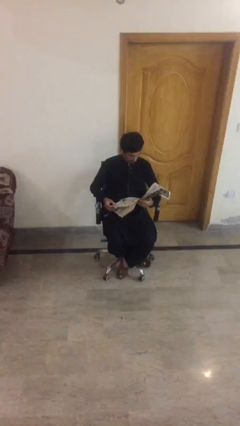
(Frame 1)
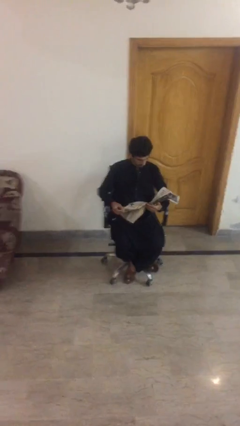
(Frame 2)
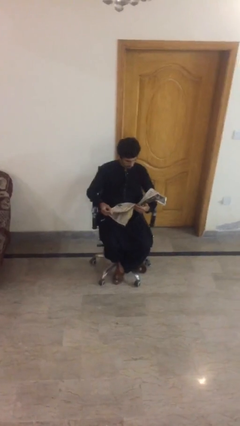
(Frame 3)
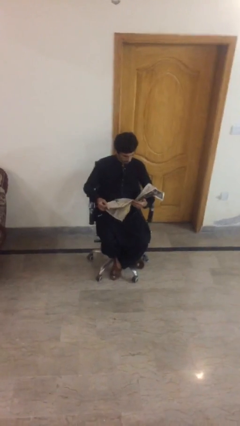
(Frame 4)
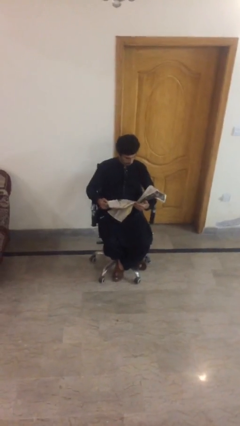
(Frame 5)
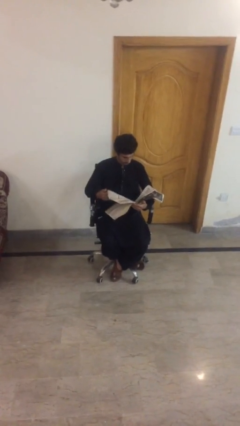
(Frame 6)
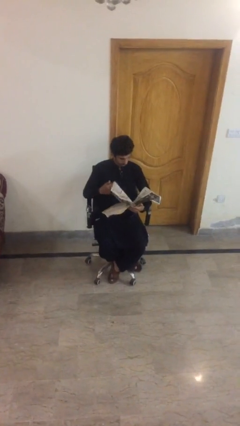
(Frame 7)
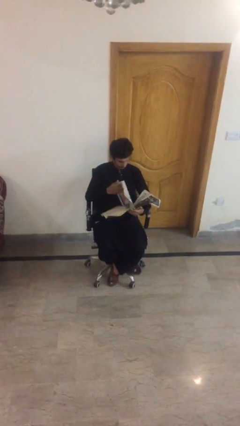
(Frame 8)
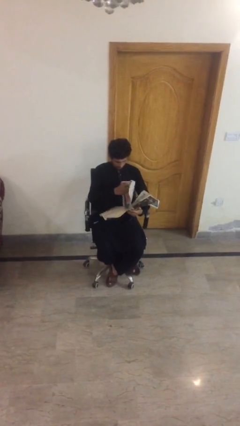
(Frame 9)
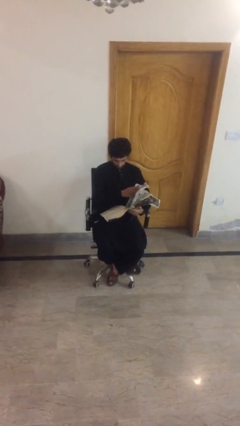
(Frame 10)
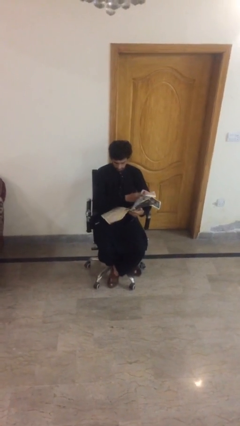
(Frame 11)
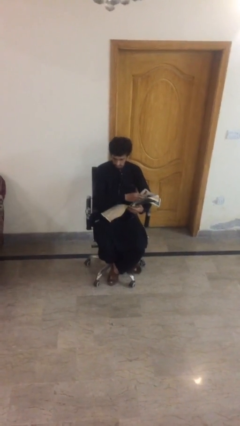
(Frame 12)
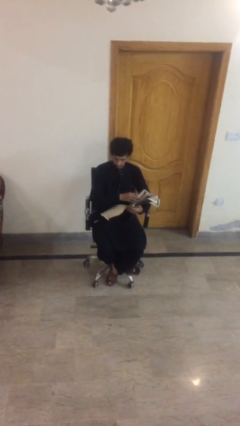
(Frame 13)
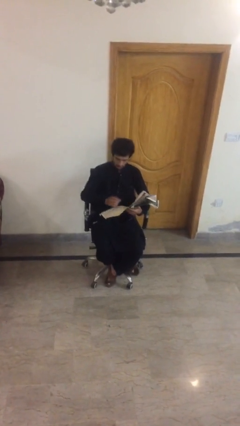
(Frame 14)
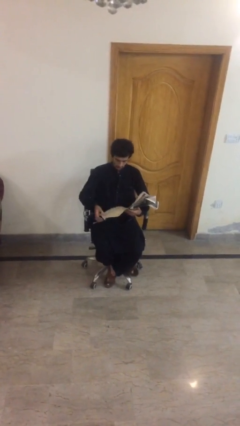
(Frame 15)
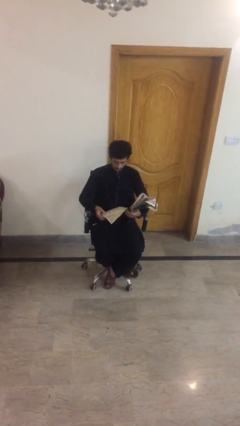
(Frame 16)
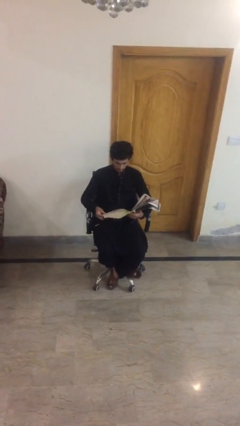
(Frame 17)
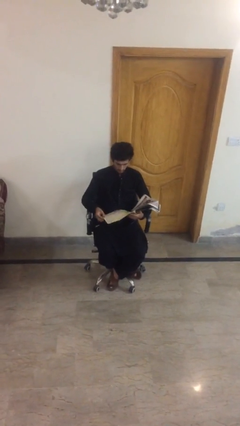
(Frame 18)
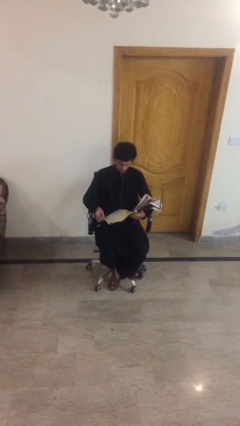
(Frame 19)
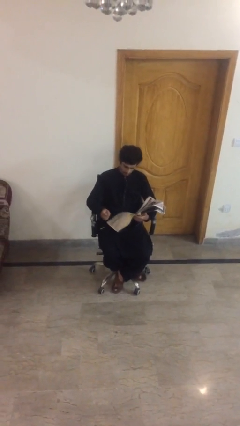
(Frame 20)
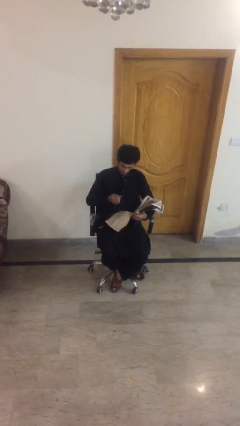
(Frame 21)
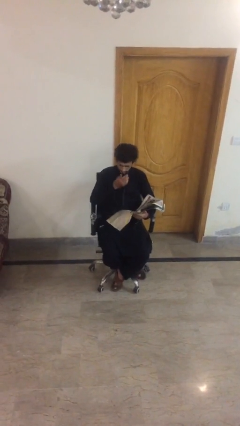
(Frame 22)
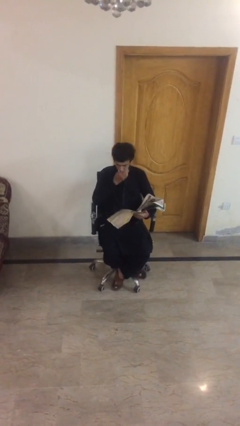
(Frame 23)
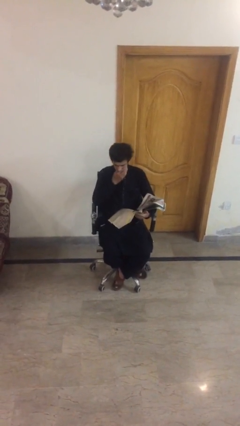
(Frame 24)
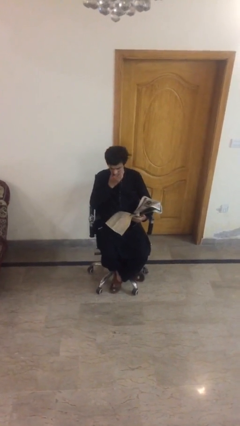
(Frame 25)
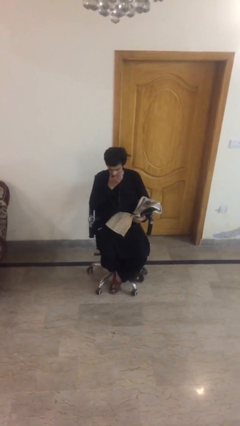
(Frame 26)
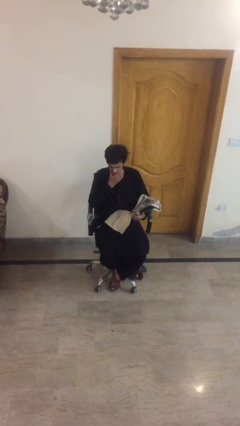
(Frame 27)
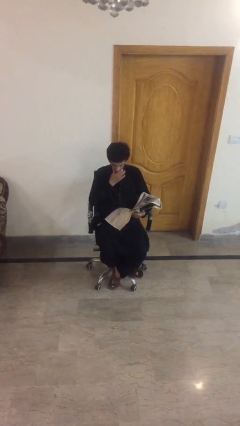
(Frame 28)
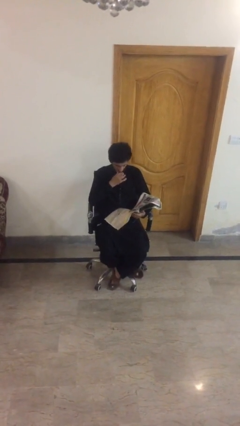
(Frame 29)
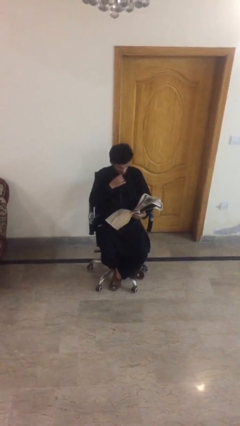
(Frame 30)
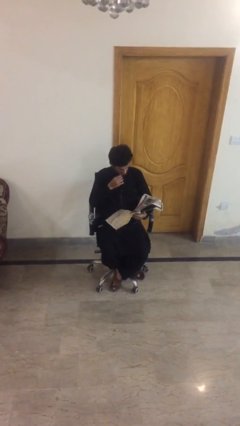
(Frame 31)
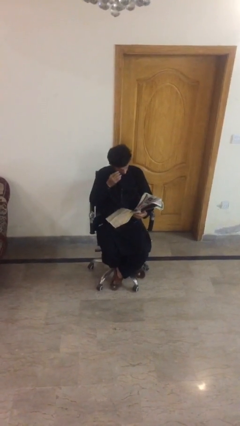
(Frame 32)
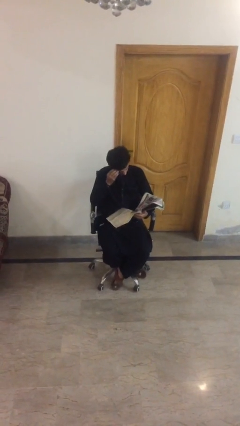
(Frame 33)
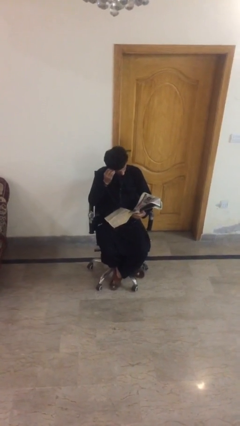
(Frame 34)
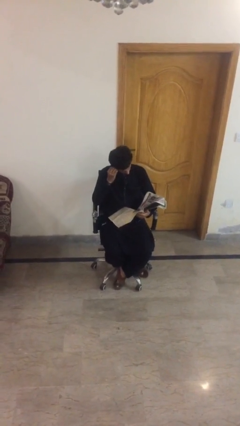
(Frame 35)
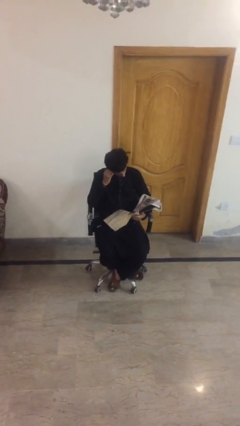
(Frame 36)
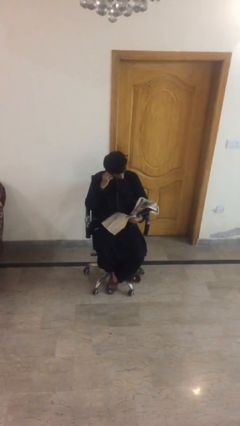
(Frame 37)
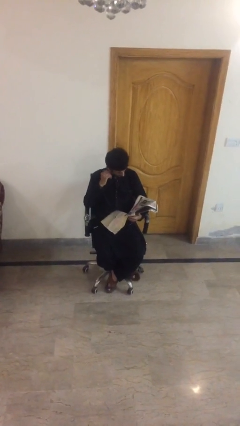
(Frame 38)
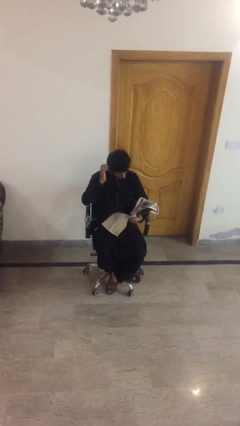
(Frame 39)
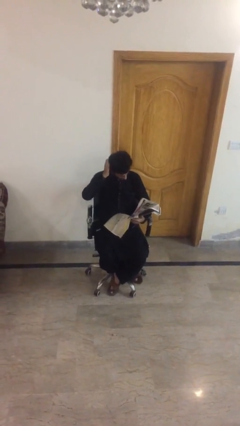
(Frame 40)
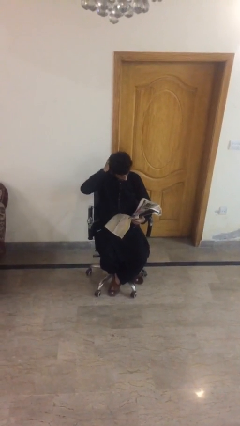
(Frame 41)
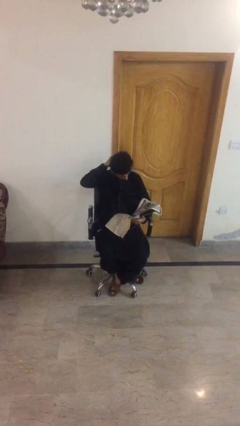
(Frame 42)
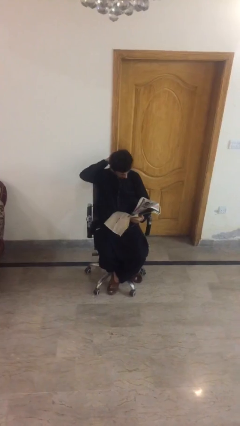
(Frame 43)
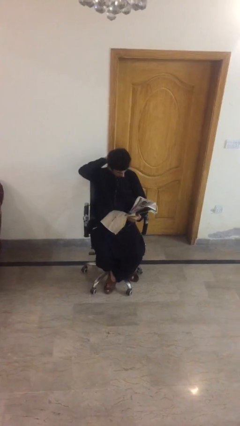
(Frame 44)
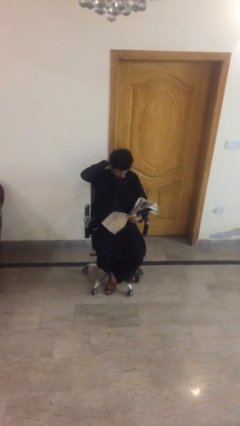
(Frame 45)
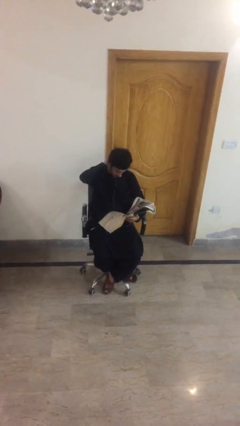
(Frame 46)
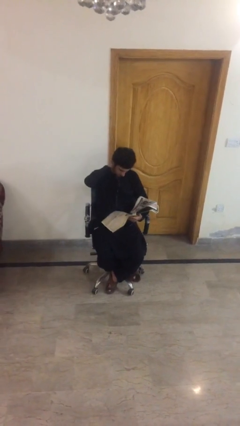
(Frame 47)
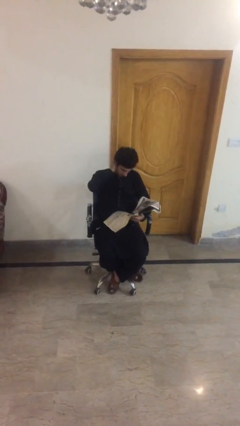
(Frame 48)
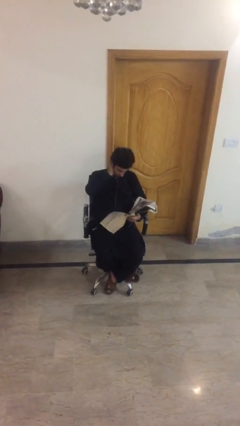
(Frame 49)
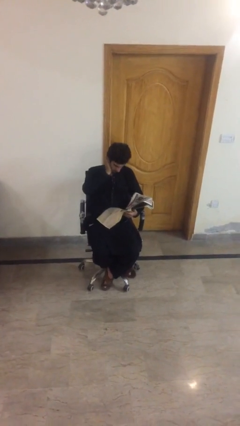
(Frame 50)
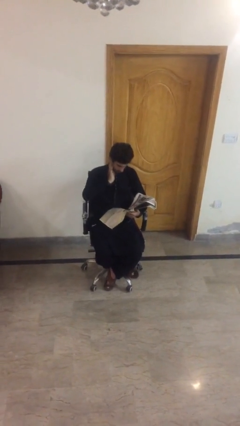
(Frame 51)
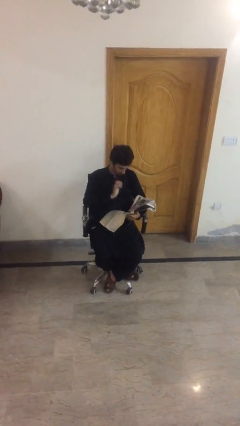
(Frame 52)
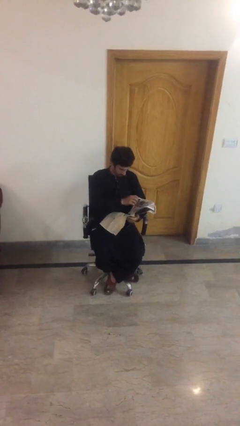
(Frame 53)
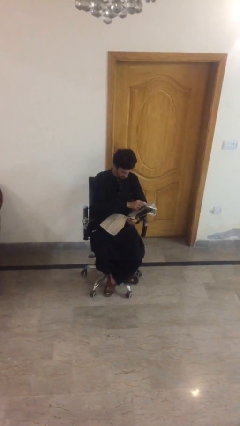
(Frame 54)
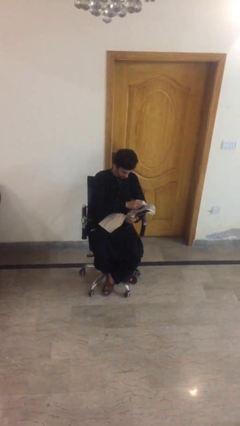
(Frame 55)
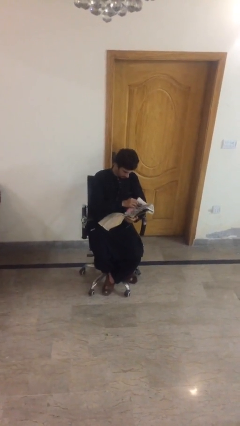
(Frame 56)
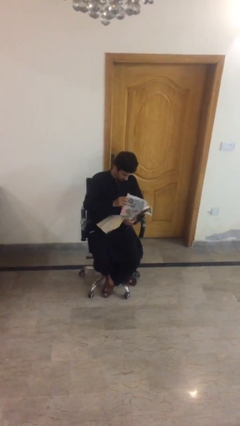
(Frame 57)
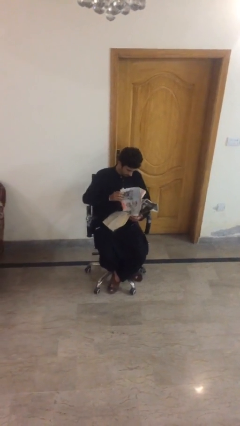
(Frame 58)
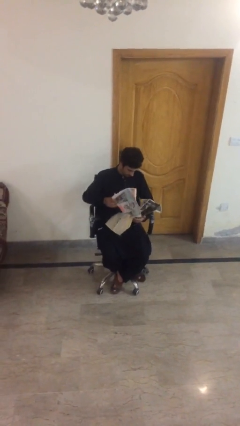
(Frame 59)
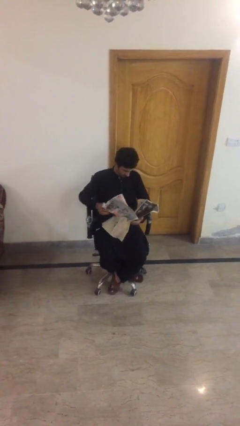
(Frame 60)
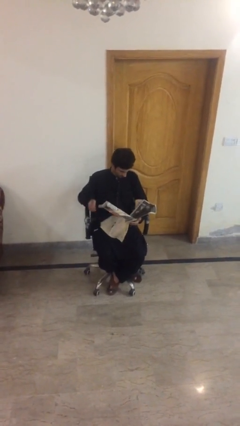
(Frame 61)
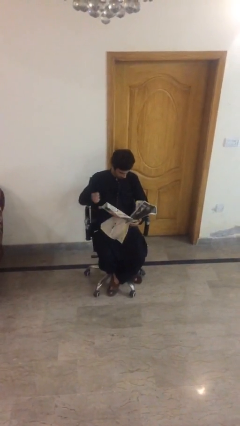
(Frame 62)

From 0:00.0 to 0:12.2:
person reads document

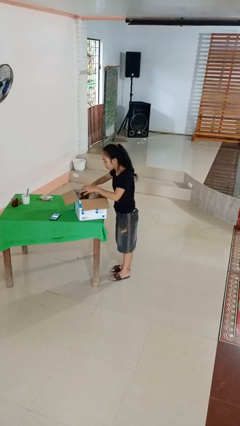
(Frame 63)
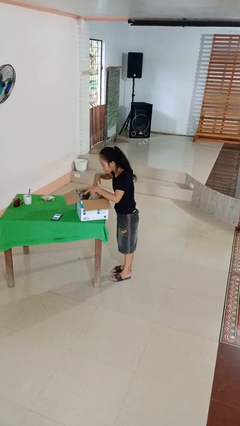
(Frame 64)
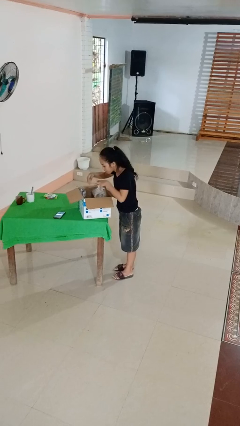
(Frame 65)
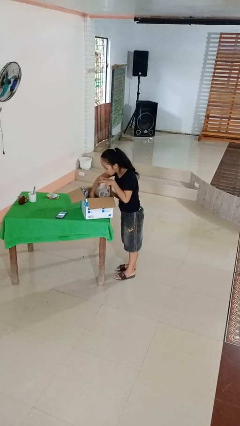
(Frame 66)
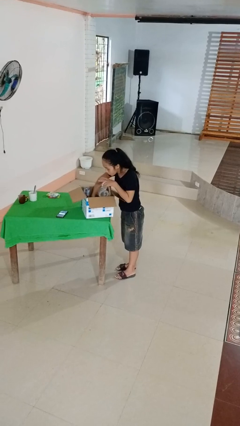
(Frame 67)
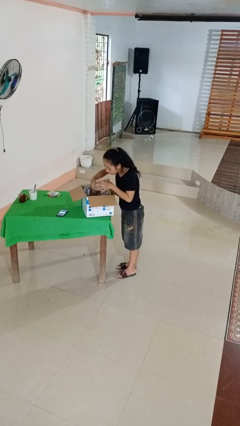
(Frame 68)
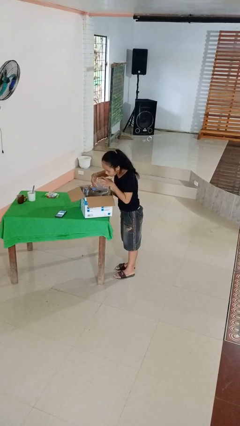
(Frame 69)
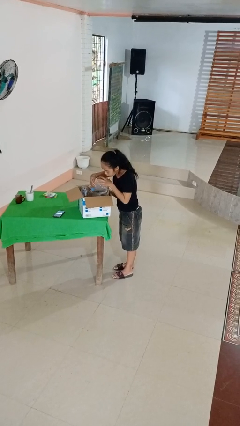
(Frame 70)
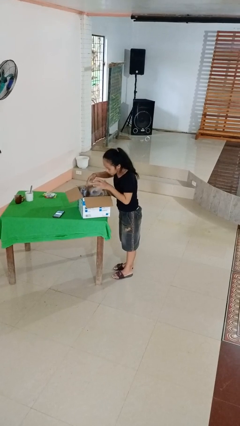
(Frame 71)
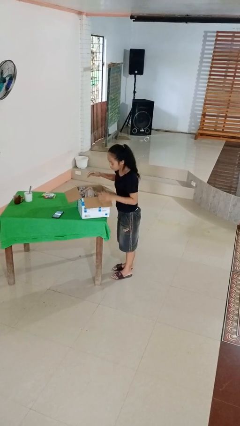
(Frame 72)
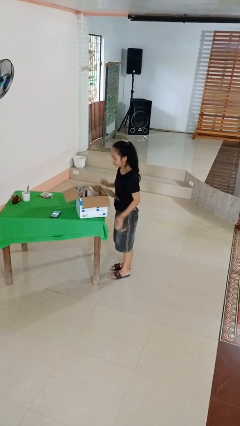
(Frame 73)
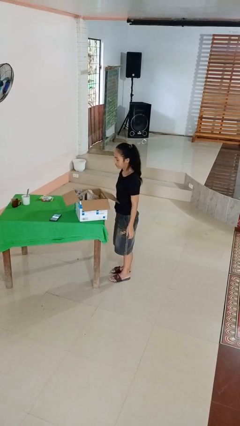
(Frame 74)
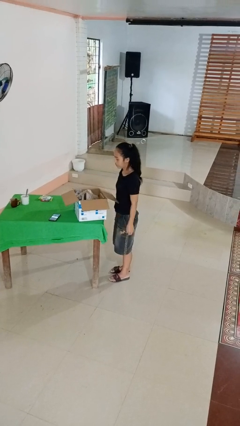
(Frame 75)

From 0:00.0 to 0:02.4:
person searches in box

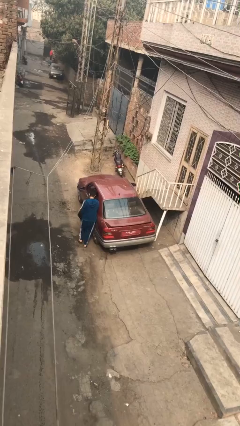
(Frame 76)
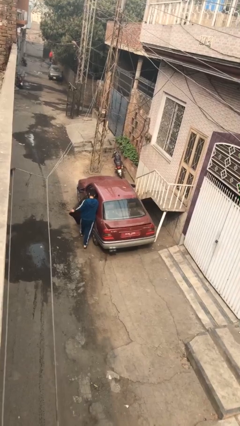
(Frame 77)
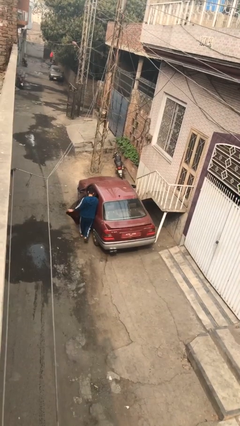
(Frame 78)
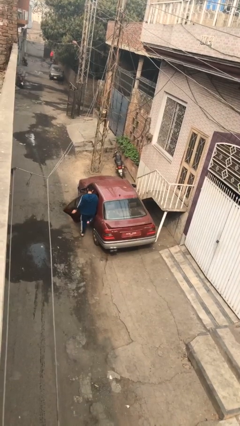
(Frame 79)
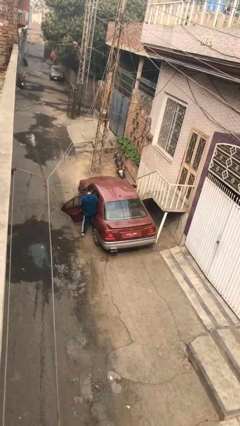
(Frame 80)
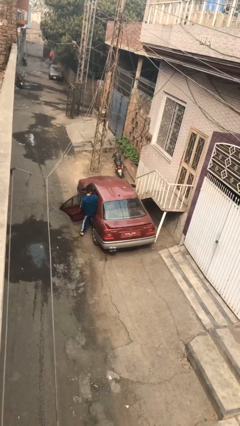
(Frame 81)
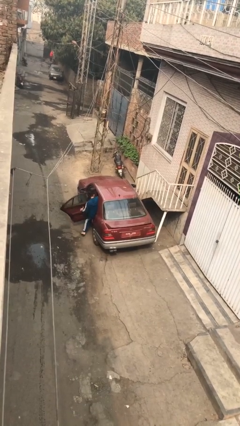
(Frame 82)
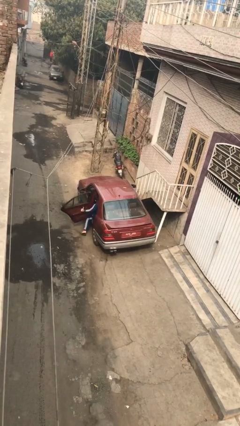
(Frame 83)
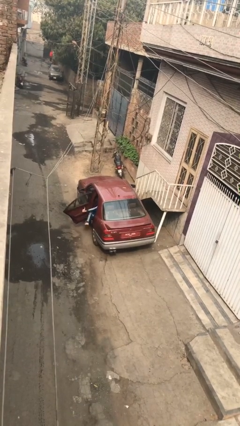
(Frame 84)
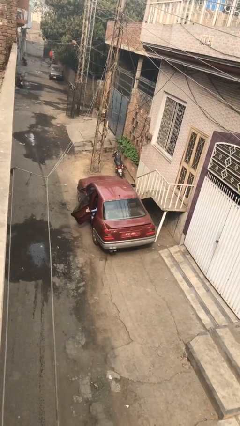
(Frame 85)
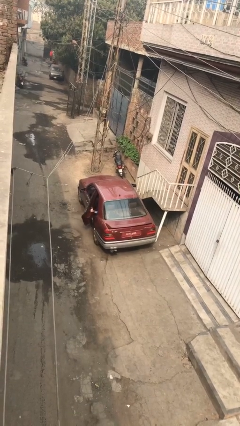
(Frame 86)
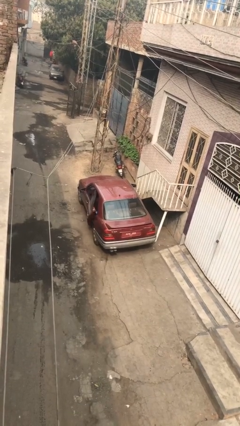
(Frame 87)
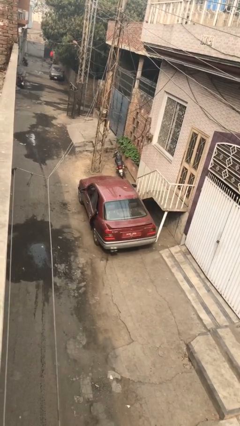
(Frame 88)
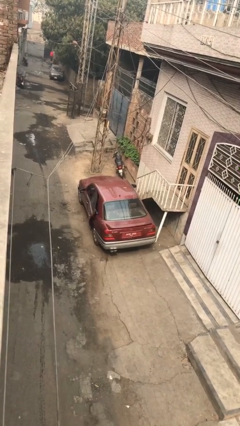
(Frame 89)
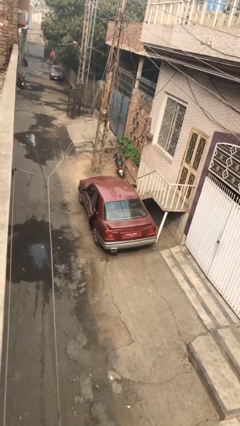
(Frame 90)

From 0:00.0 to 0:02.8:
car picks up person

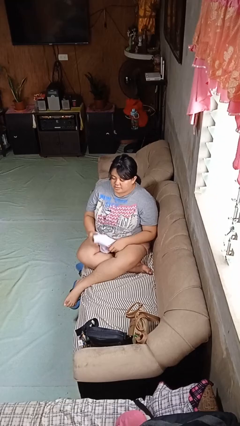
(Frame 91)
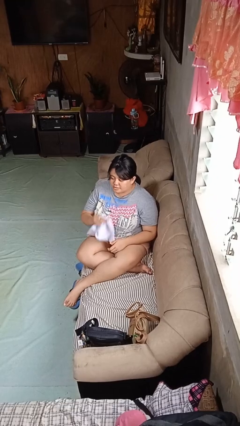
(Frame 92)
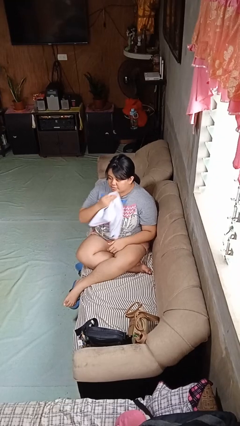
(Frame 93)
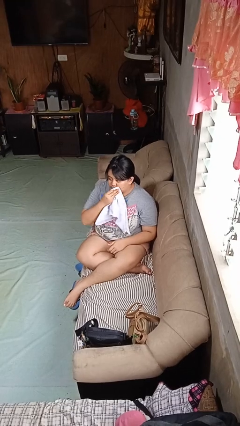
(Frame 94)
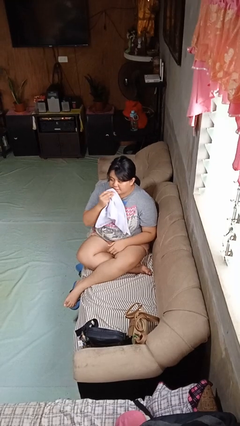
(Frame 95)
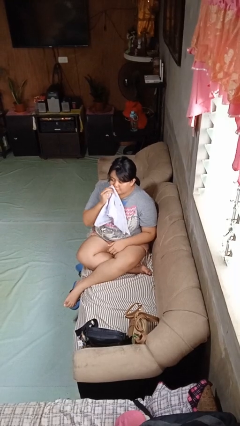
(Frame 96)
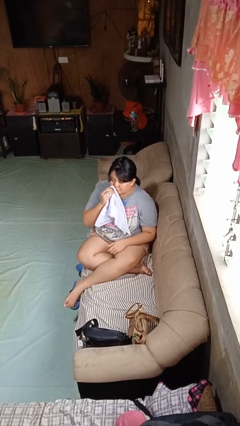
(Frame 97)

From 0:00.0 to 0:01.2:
person wipes mouth with napkin
